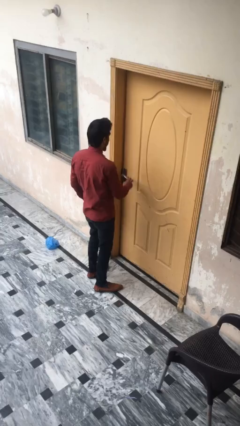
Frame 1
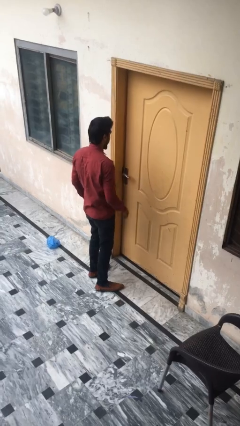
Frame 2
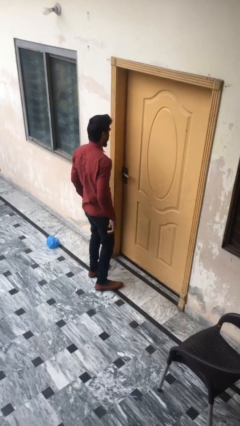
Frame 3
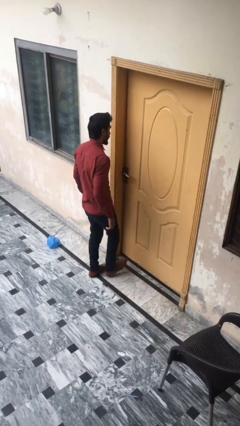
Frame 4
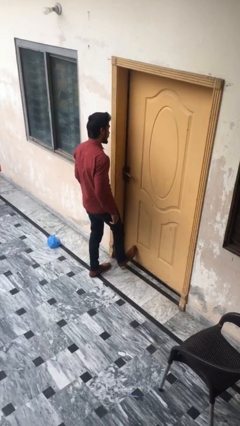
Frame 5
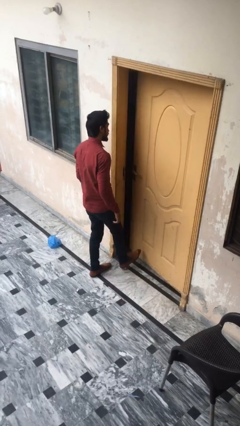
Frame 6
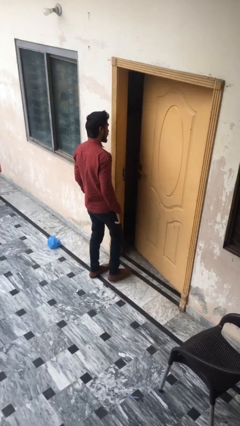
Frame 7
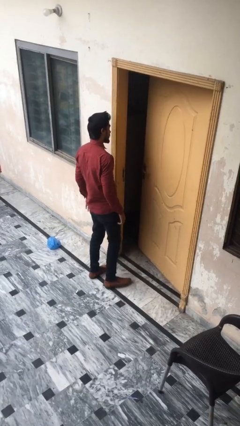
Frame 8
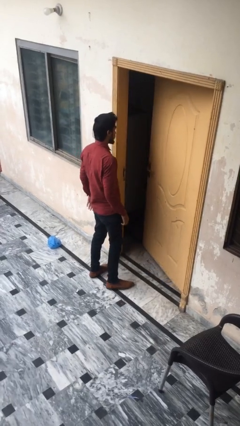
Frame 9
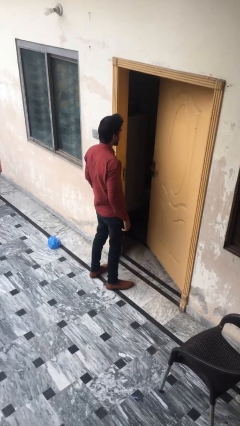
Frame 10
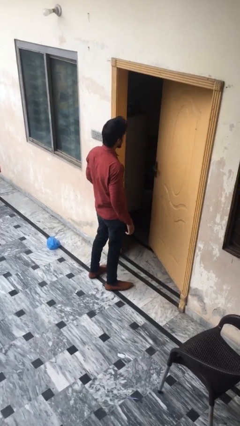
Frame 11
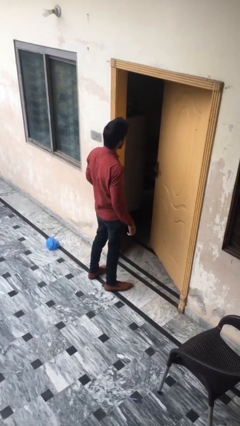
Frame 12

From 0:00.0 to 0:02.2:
person opens facility door

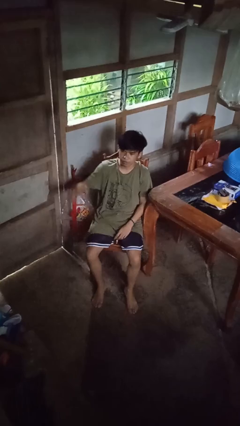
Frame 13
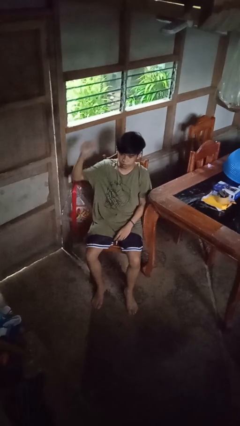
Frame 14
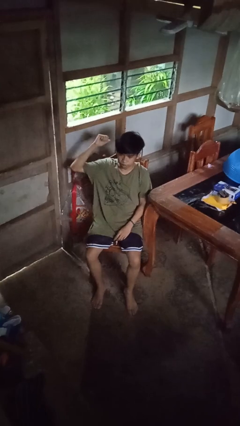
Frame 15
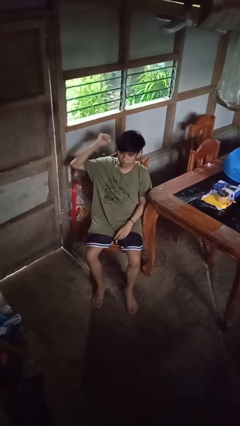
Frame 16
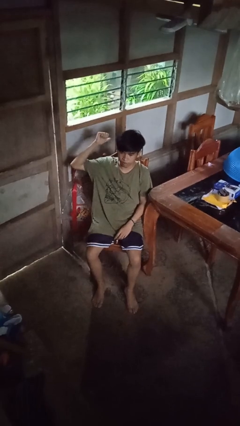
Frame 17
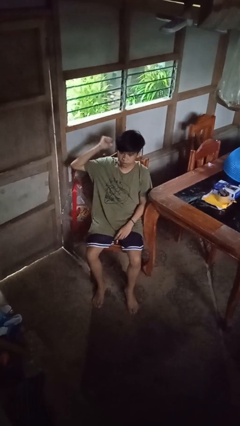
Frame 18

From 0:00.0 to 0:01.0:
person gestures behind me

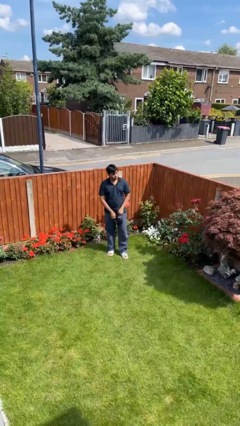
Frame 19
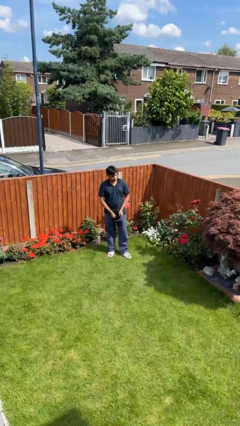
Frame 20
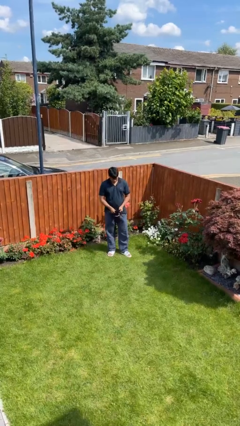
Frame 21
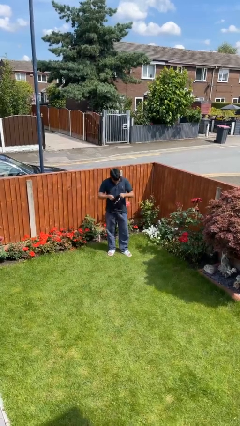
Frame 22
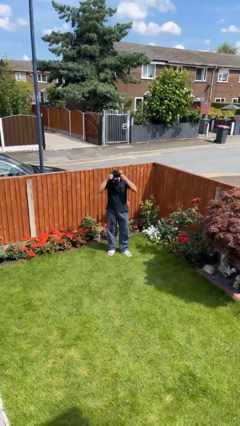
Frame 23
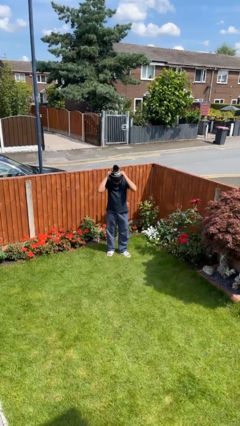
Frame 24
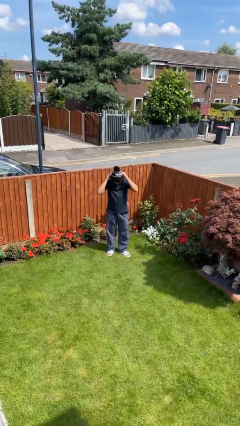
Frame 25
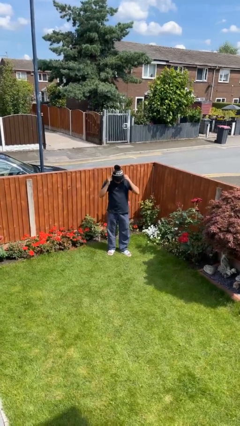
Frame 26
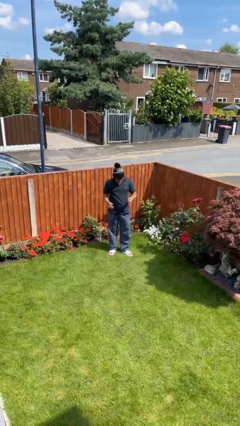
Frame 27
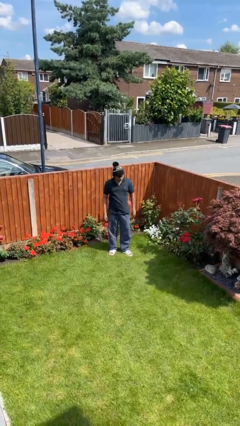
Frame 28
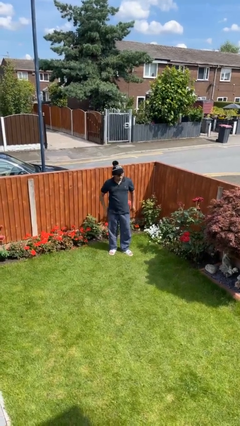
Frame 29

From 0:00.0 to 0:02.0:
person puts on hat

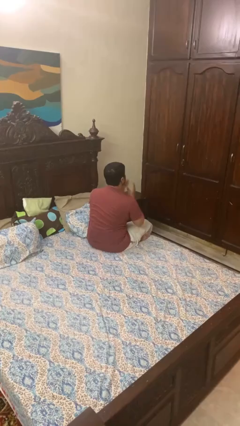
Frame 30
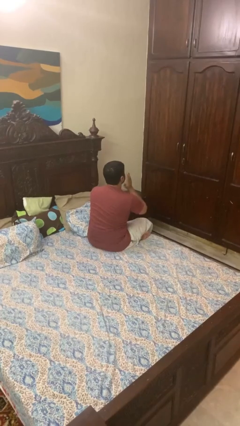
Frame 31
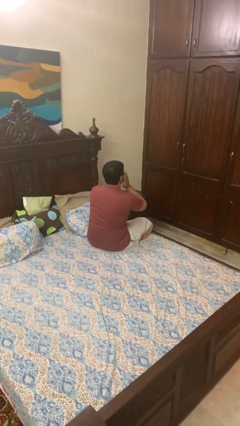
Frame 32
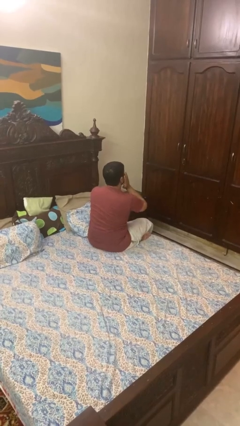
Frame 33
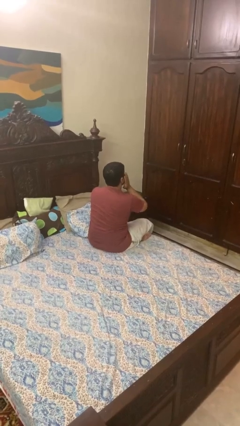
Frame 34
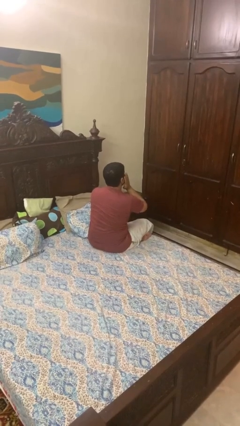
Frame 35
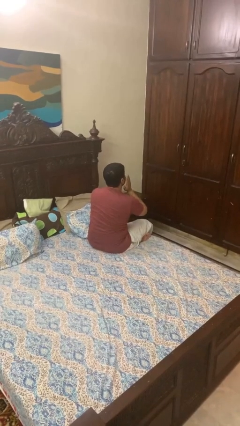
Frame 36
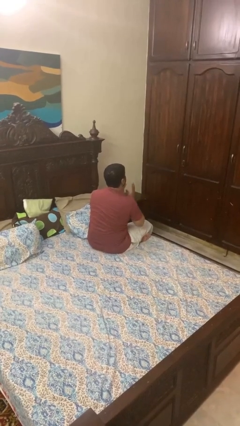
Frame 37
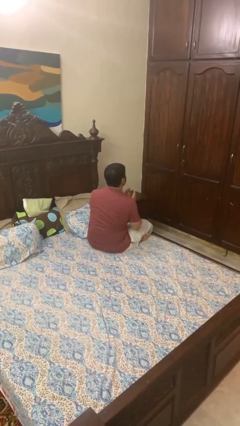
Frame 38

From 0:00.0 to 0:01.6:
person covers face with hands

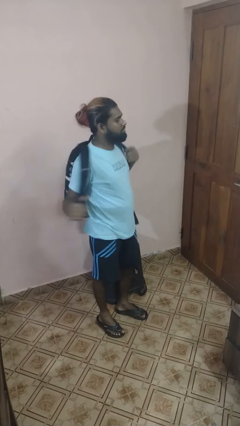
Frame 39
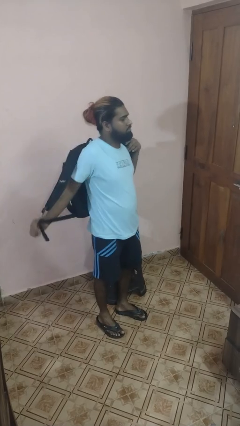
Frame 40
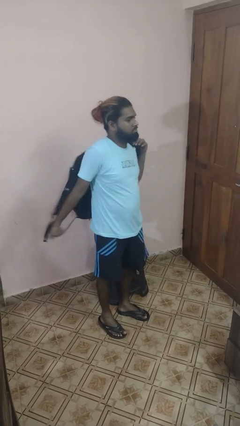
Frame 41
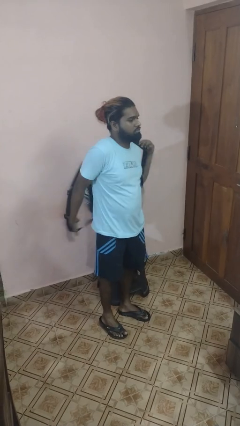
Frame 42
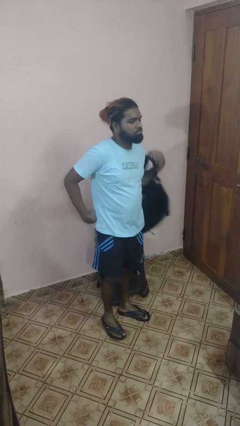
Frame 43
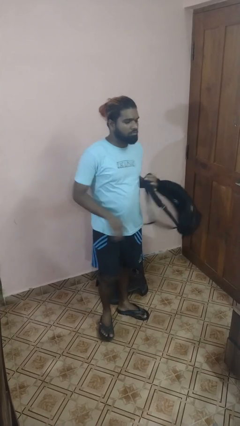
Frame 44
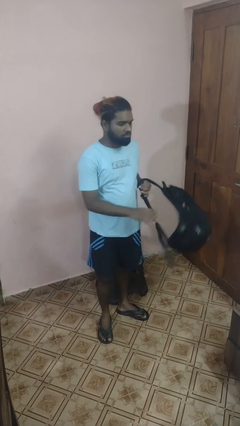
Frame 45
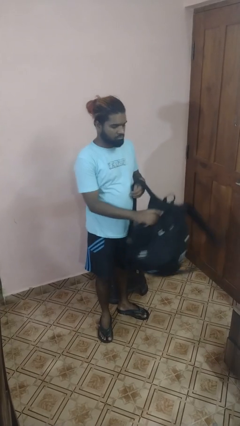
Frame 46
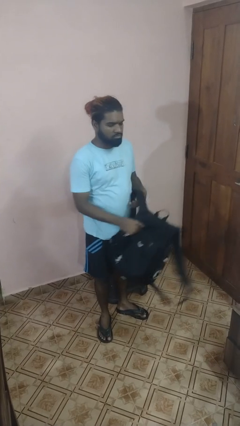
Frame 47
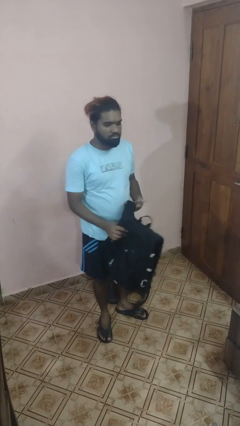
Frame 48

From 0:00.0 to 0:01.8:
person takes off backpack

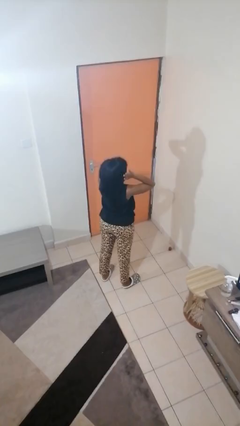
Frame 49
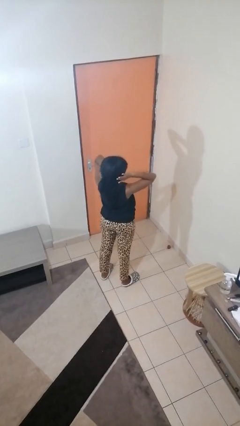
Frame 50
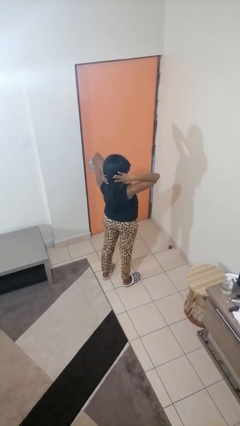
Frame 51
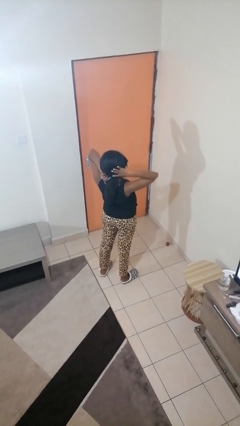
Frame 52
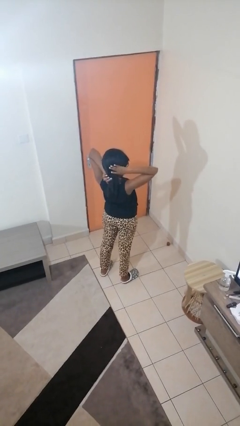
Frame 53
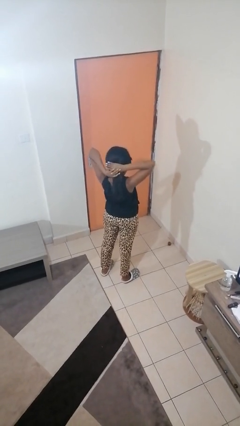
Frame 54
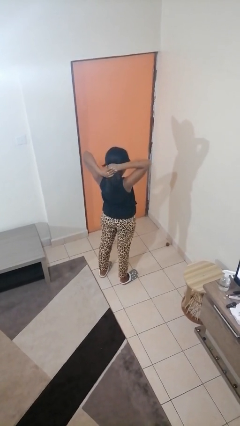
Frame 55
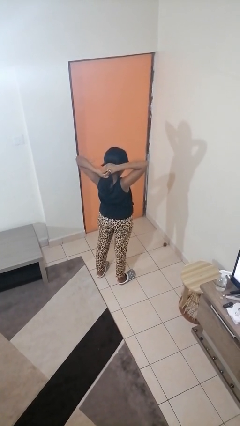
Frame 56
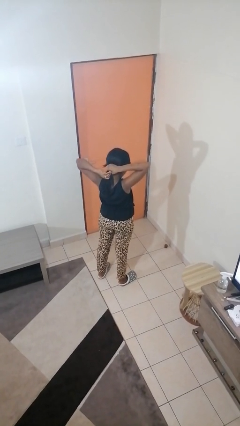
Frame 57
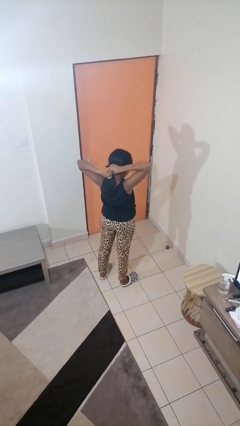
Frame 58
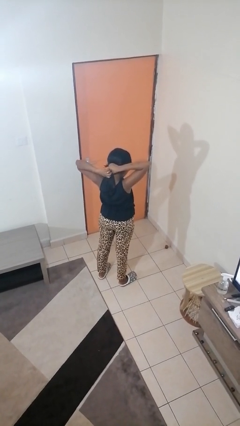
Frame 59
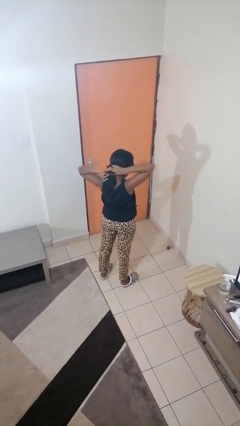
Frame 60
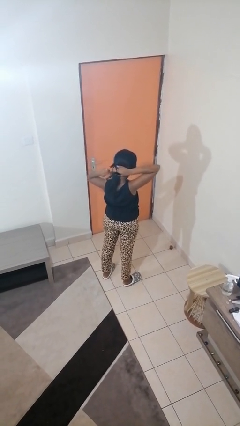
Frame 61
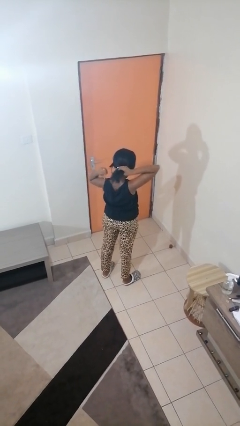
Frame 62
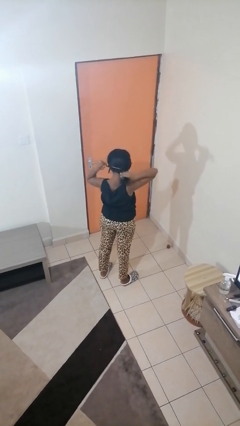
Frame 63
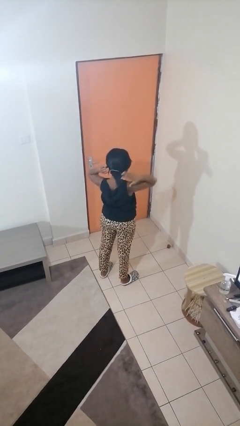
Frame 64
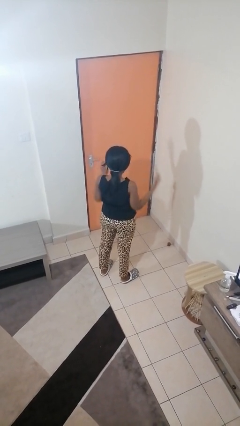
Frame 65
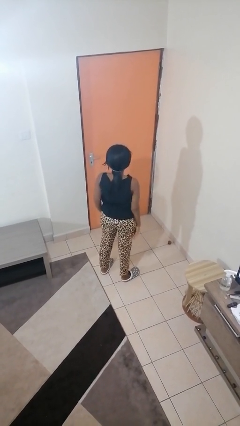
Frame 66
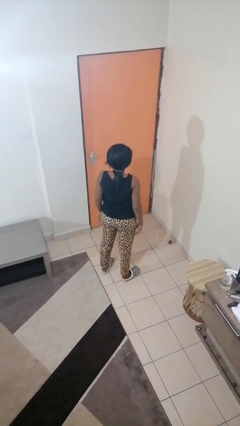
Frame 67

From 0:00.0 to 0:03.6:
person puts hair in ponytail

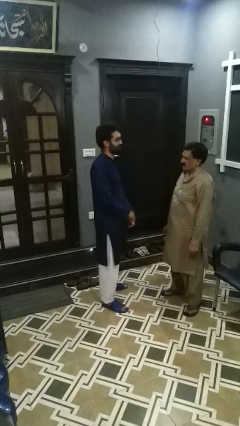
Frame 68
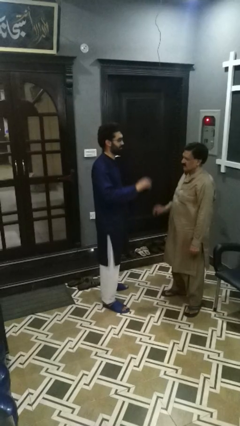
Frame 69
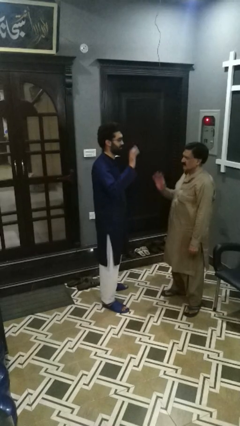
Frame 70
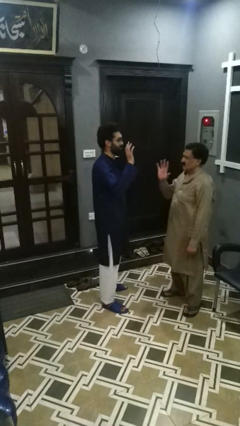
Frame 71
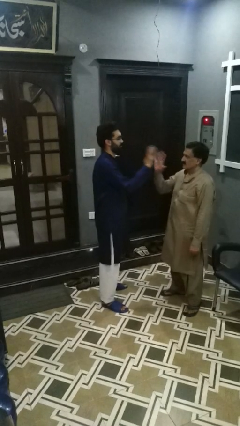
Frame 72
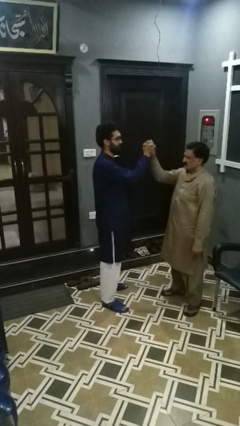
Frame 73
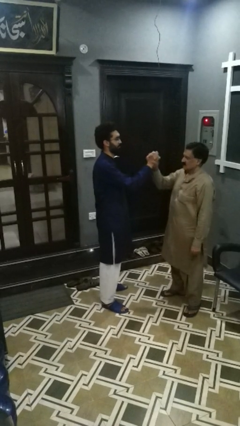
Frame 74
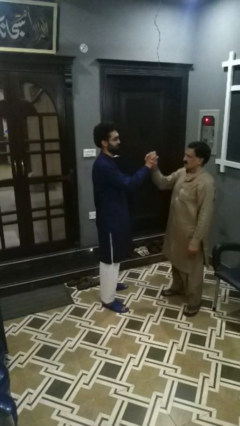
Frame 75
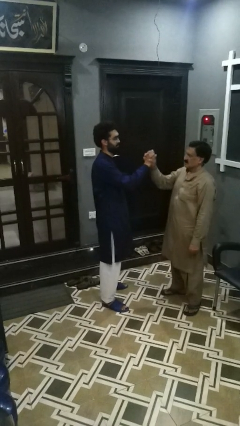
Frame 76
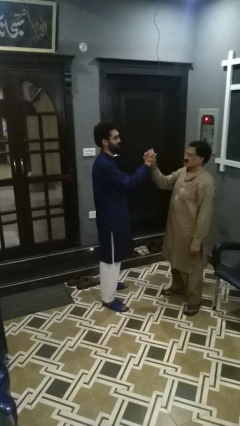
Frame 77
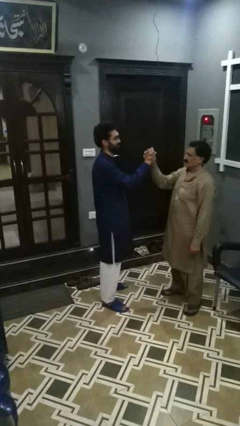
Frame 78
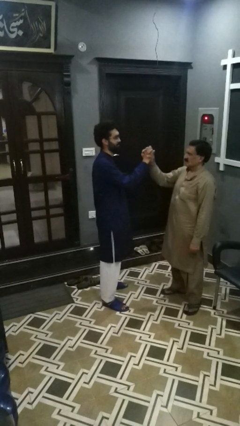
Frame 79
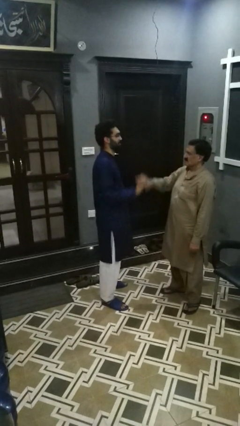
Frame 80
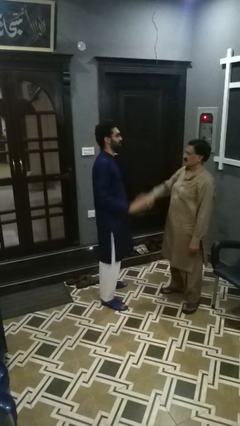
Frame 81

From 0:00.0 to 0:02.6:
person highfives hand

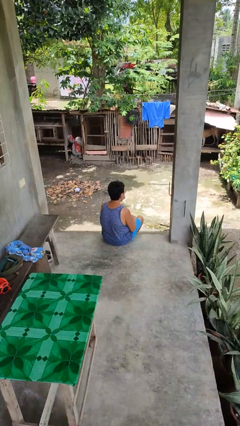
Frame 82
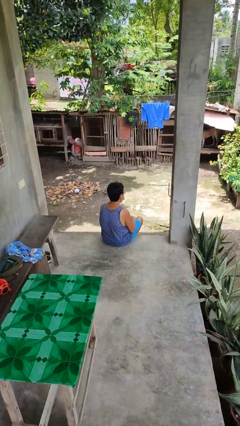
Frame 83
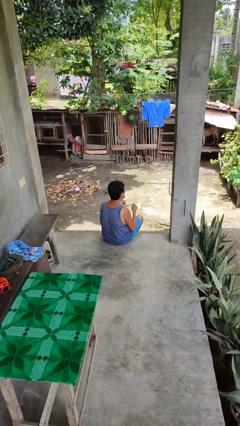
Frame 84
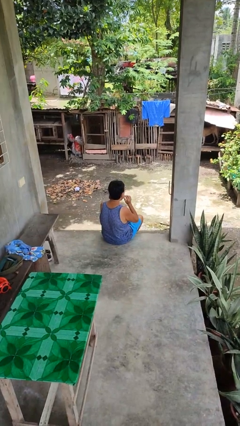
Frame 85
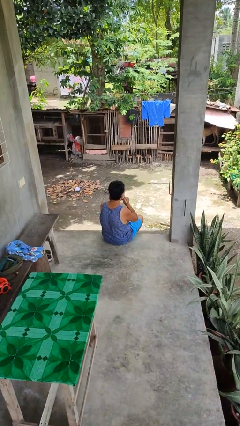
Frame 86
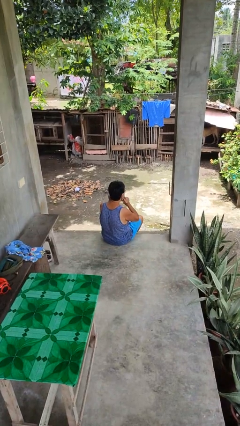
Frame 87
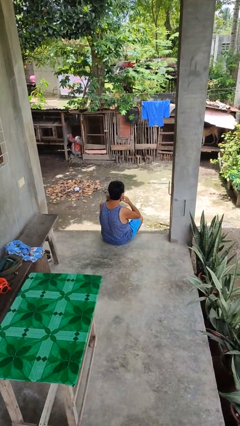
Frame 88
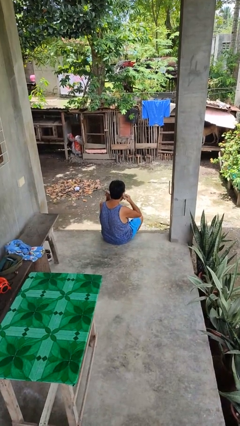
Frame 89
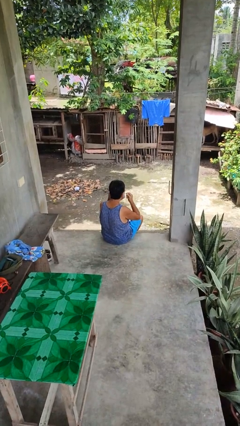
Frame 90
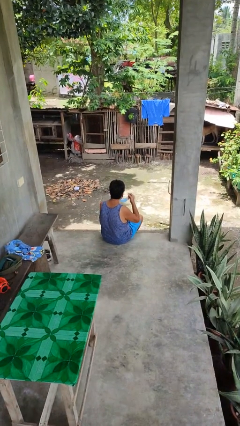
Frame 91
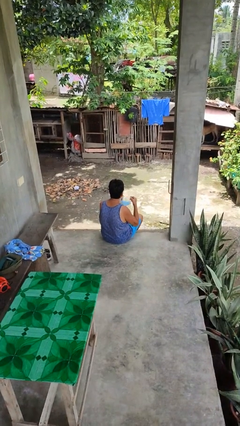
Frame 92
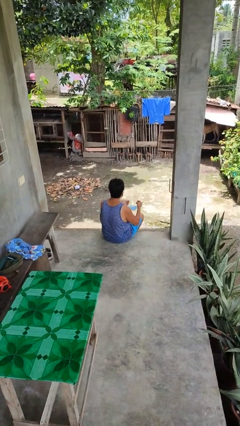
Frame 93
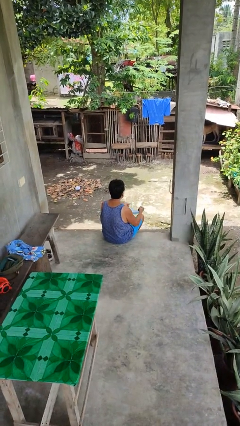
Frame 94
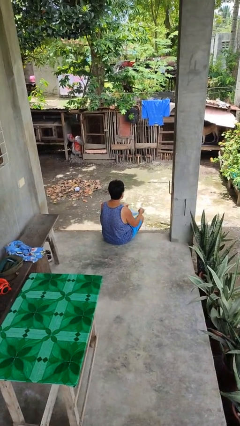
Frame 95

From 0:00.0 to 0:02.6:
person takes off facemask
